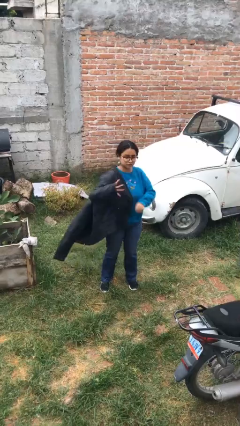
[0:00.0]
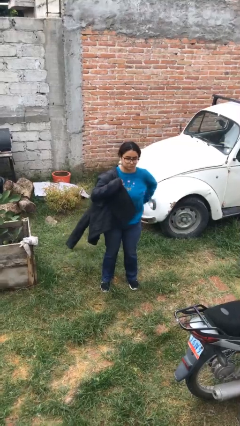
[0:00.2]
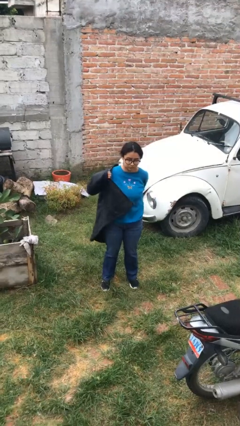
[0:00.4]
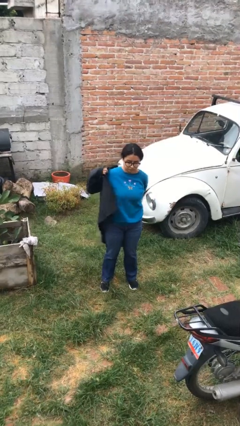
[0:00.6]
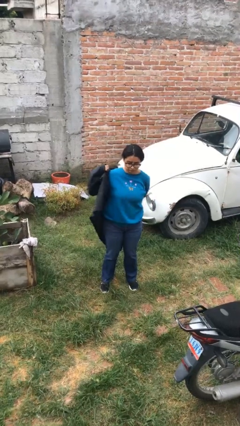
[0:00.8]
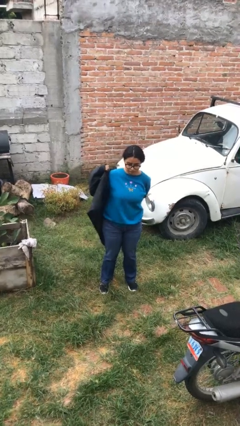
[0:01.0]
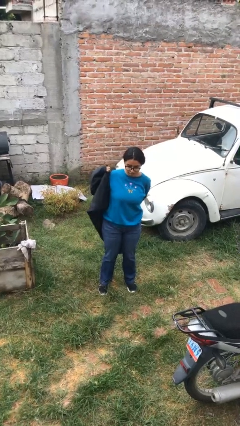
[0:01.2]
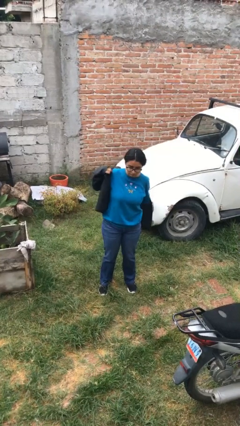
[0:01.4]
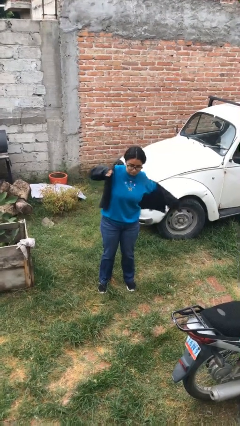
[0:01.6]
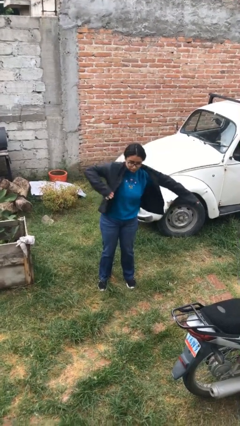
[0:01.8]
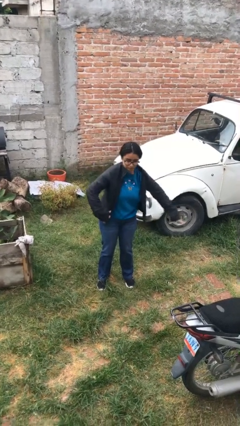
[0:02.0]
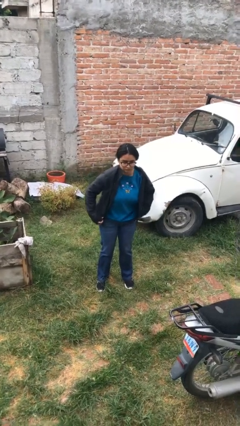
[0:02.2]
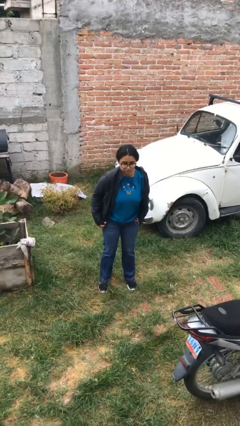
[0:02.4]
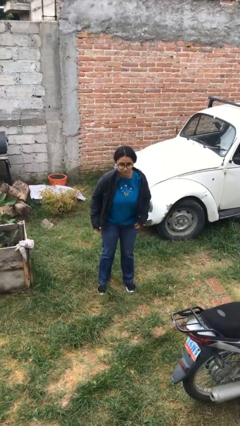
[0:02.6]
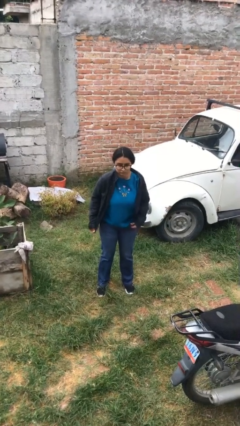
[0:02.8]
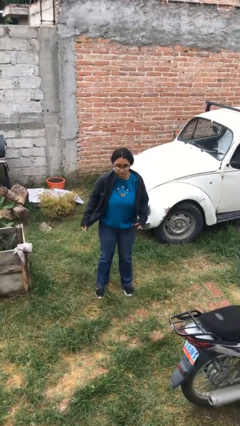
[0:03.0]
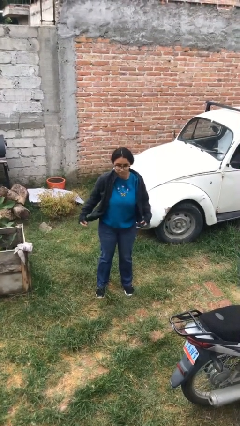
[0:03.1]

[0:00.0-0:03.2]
person puts on jacket

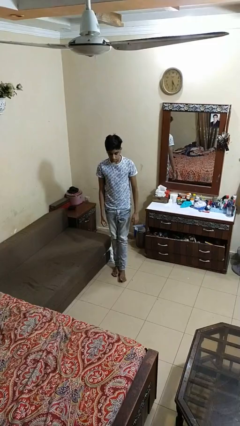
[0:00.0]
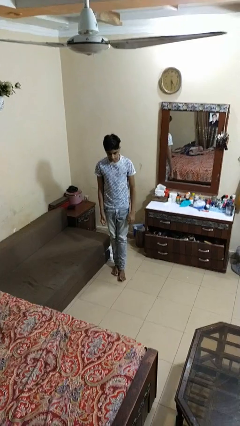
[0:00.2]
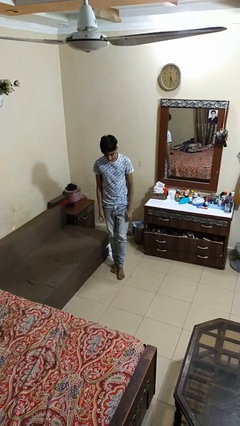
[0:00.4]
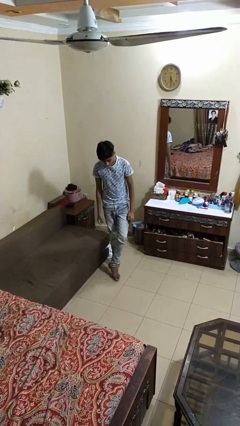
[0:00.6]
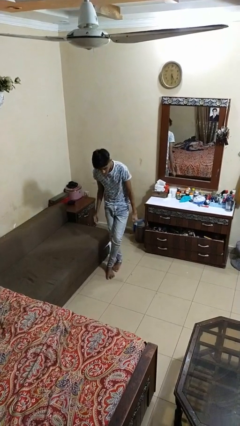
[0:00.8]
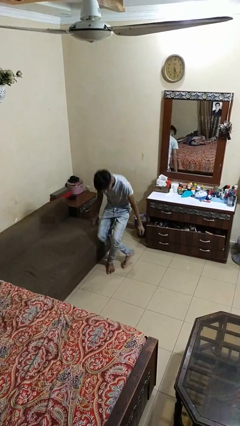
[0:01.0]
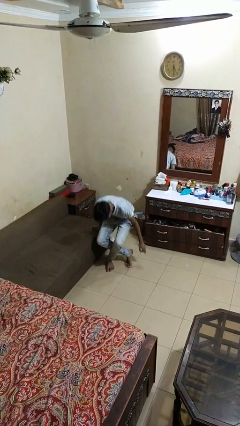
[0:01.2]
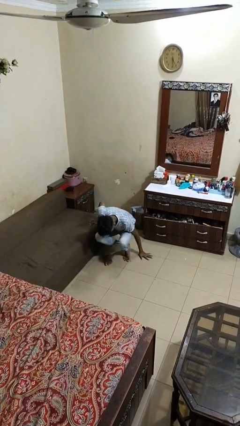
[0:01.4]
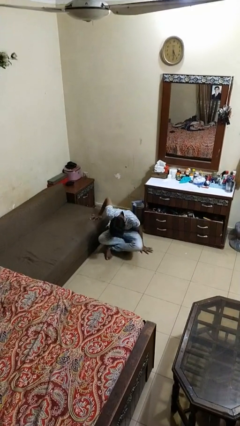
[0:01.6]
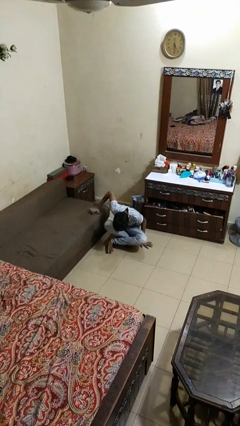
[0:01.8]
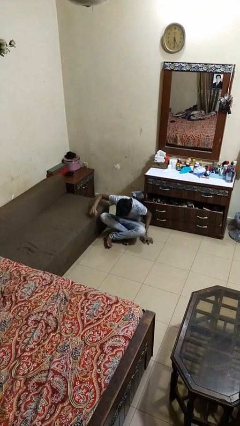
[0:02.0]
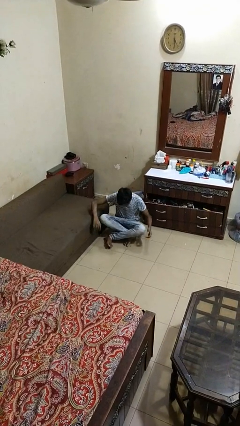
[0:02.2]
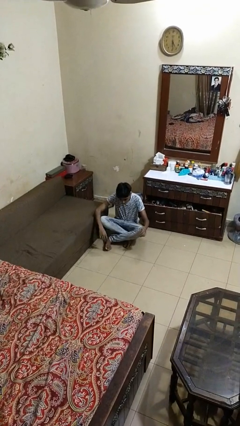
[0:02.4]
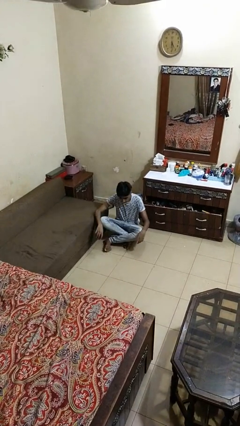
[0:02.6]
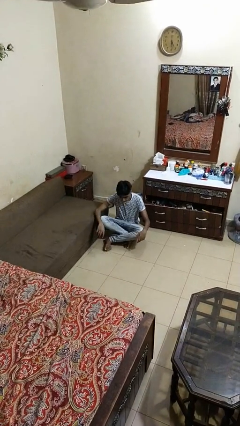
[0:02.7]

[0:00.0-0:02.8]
person sits crisscross

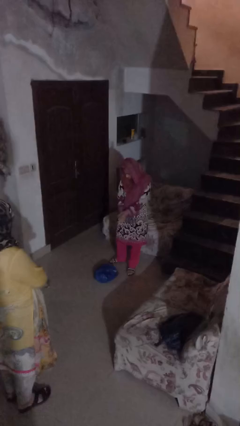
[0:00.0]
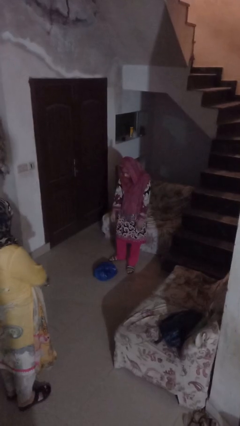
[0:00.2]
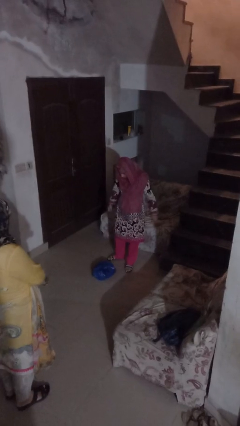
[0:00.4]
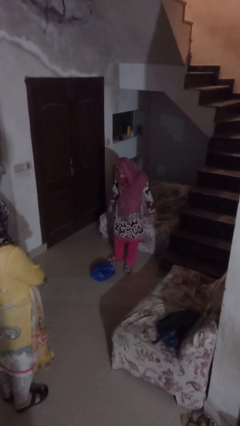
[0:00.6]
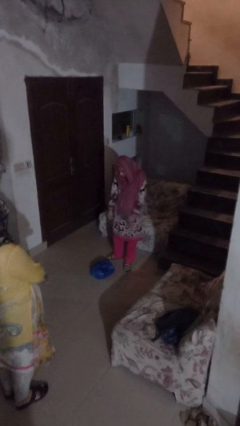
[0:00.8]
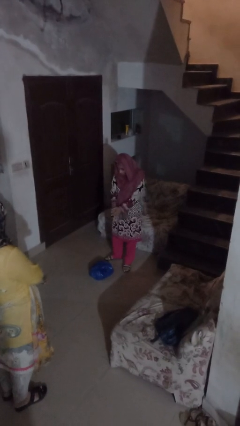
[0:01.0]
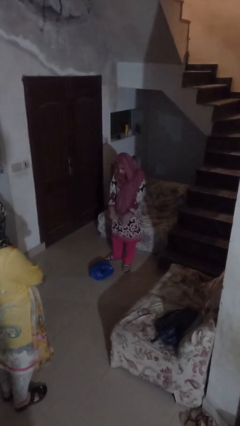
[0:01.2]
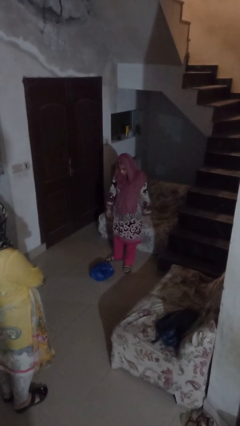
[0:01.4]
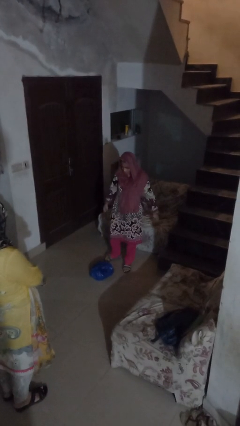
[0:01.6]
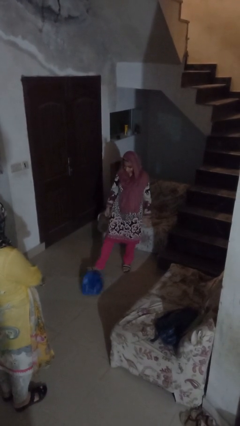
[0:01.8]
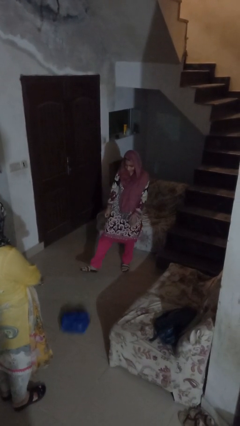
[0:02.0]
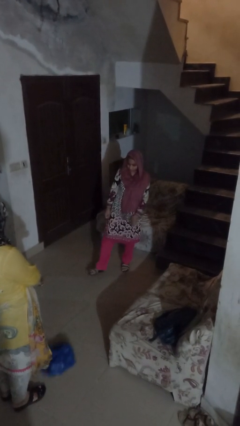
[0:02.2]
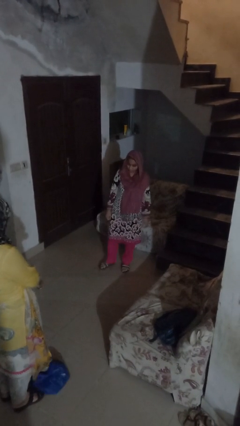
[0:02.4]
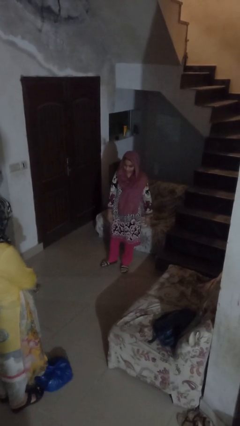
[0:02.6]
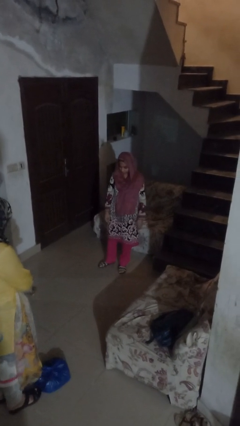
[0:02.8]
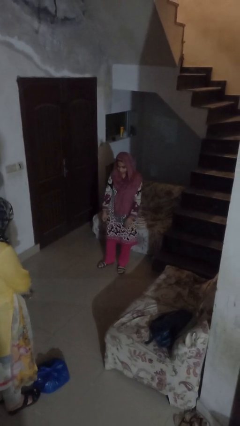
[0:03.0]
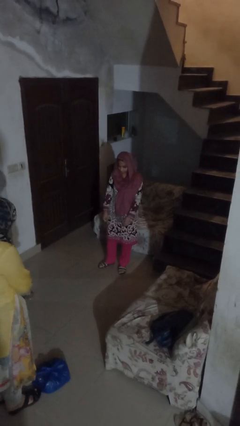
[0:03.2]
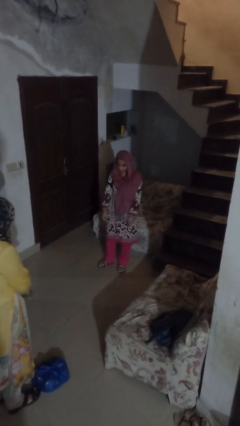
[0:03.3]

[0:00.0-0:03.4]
person kicks object to person

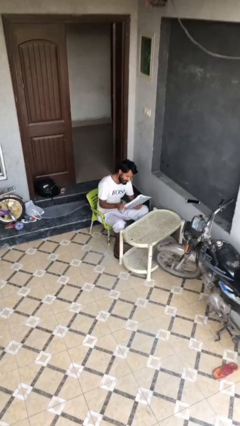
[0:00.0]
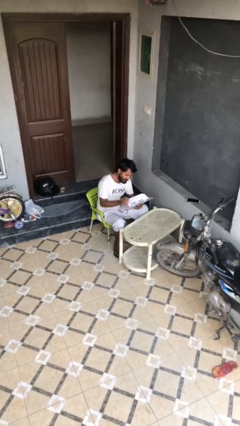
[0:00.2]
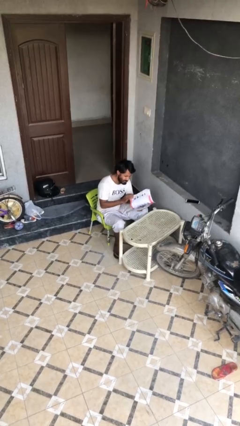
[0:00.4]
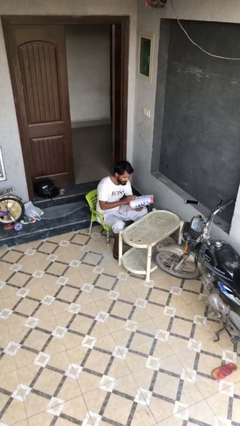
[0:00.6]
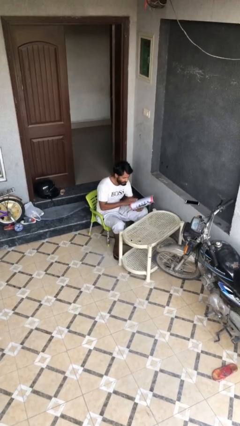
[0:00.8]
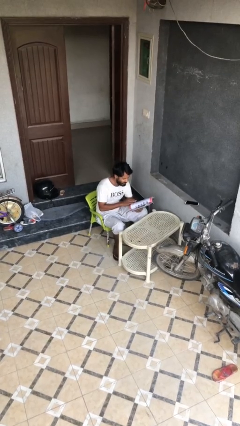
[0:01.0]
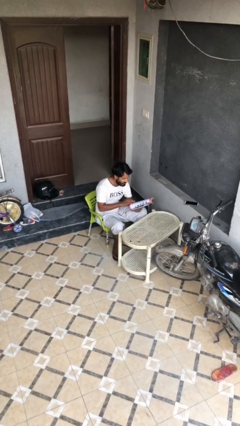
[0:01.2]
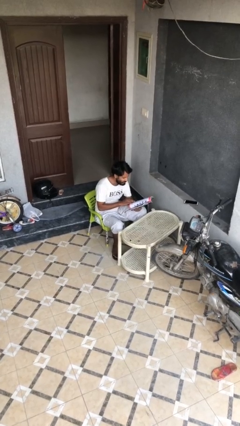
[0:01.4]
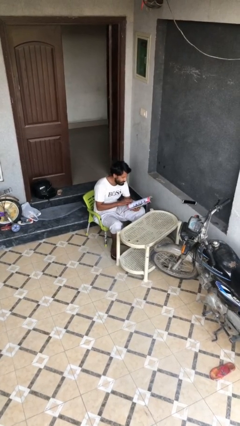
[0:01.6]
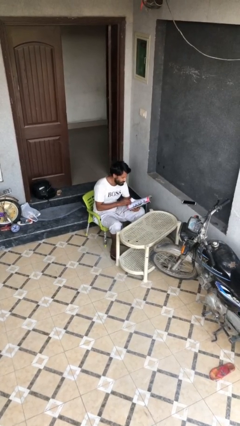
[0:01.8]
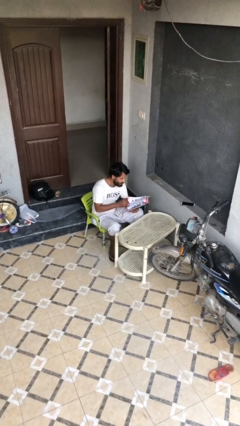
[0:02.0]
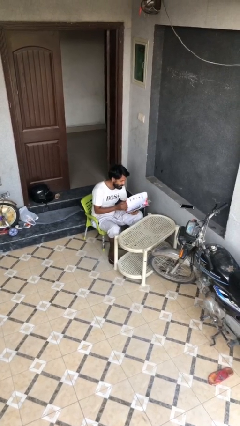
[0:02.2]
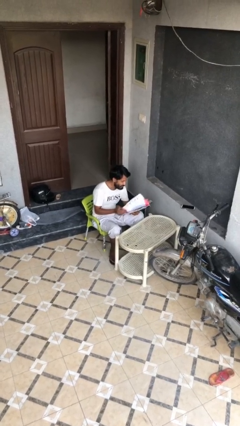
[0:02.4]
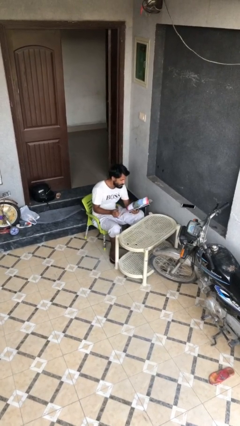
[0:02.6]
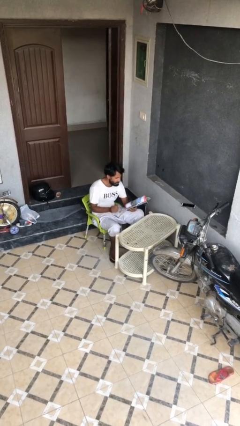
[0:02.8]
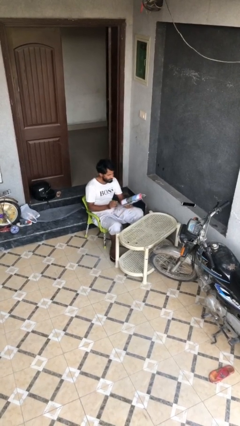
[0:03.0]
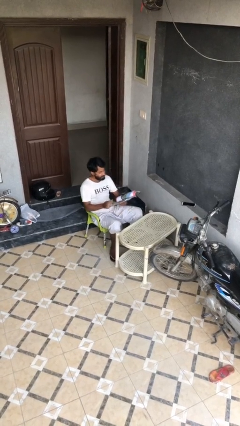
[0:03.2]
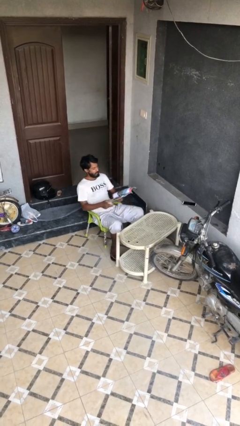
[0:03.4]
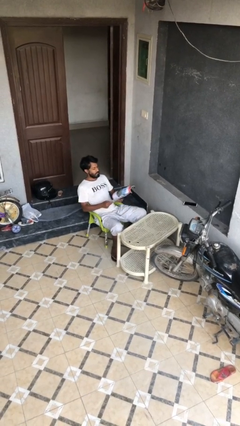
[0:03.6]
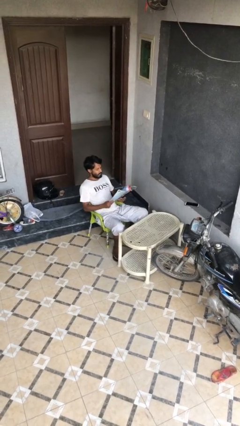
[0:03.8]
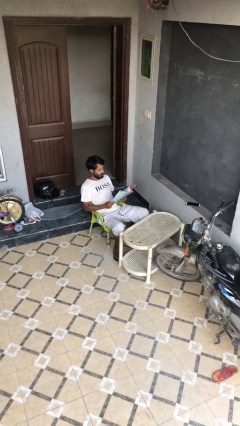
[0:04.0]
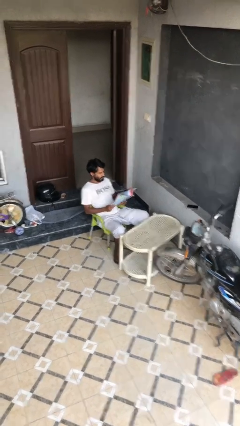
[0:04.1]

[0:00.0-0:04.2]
person reads document

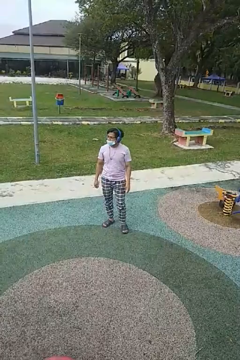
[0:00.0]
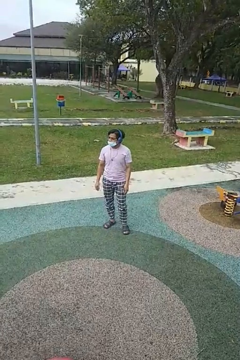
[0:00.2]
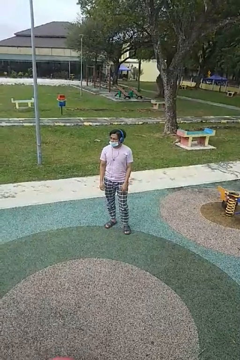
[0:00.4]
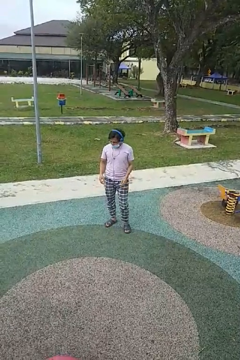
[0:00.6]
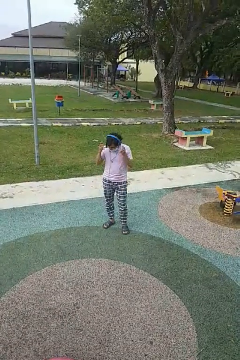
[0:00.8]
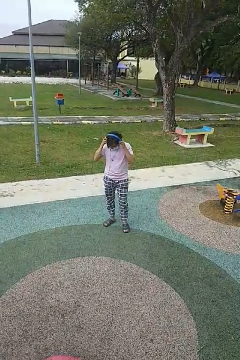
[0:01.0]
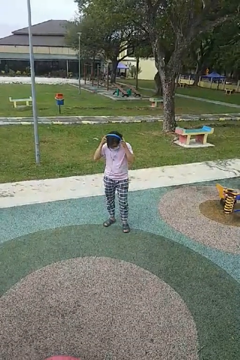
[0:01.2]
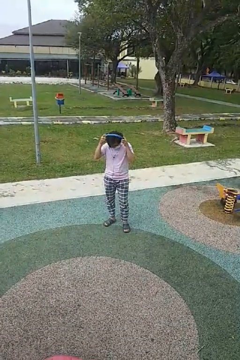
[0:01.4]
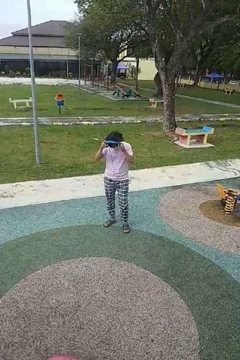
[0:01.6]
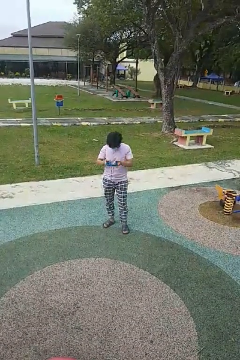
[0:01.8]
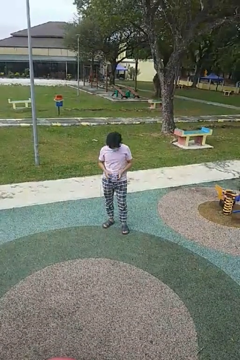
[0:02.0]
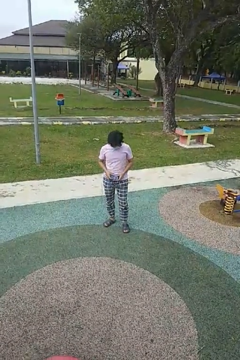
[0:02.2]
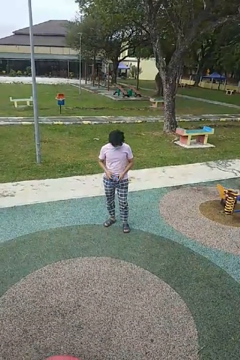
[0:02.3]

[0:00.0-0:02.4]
person takes off headphones

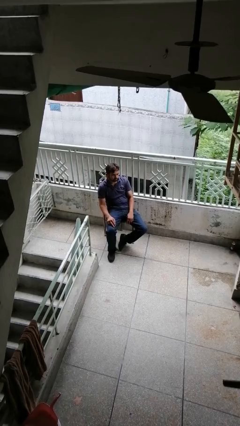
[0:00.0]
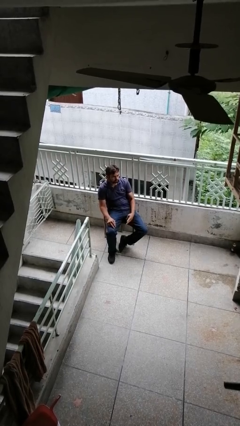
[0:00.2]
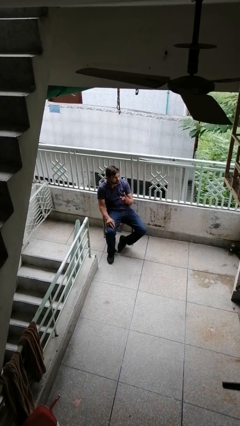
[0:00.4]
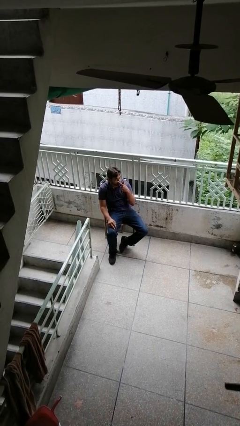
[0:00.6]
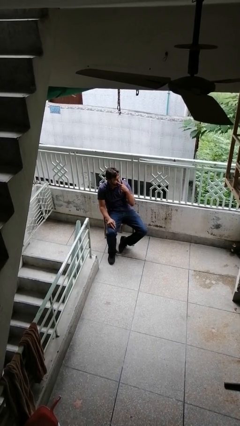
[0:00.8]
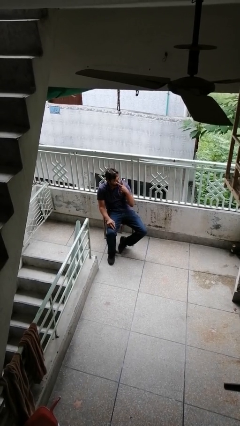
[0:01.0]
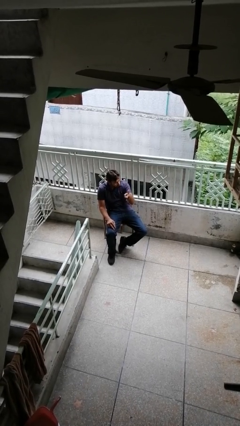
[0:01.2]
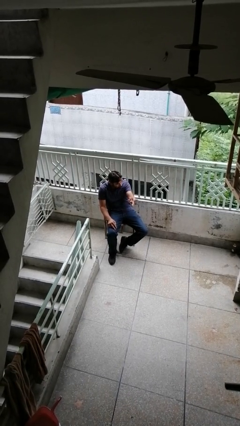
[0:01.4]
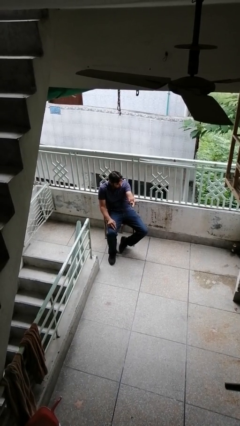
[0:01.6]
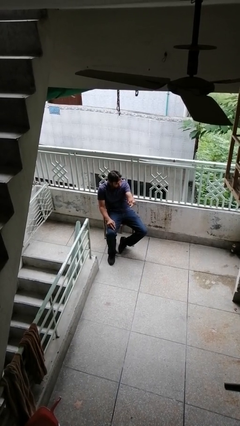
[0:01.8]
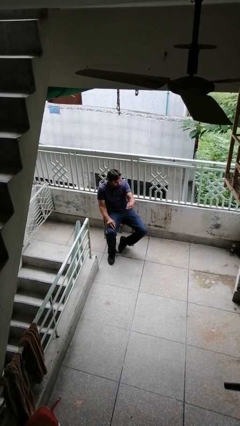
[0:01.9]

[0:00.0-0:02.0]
person gestures watch closely
